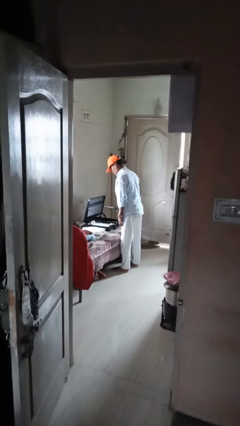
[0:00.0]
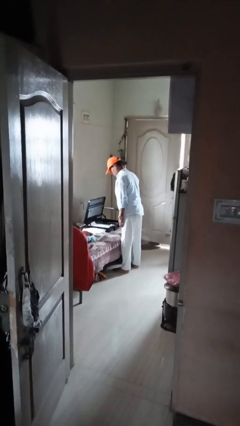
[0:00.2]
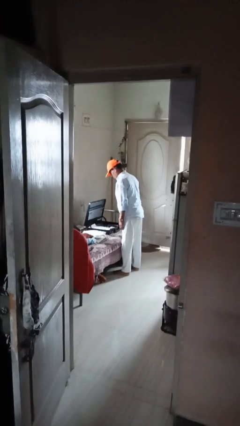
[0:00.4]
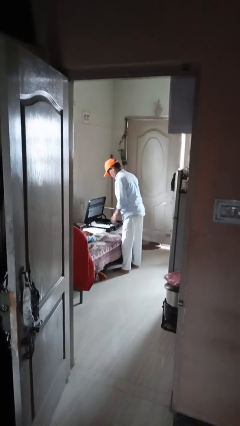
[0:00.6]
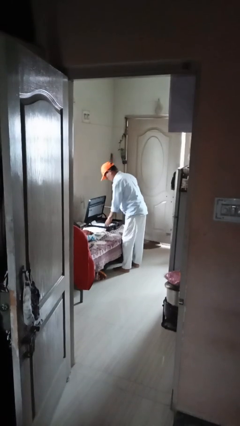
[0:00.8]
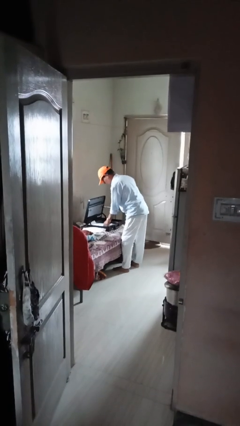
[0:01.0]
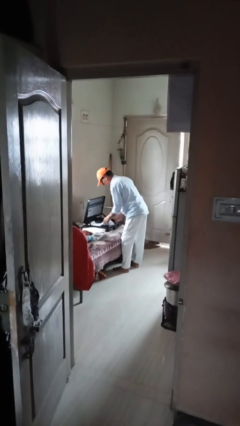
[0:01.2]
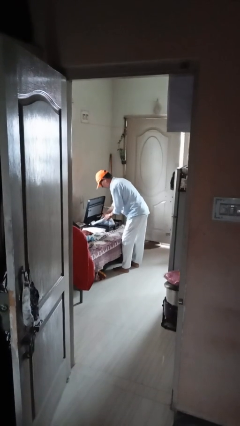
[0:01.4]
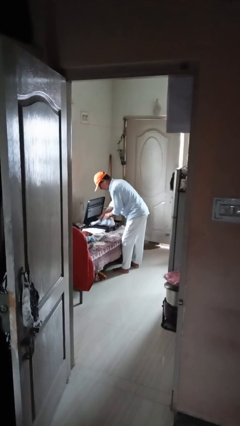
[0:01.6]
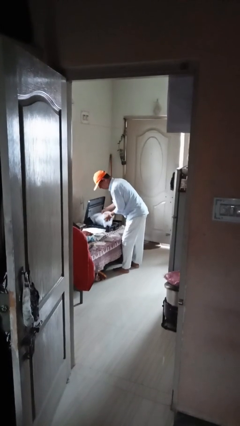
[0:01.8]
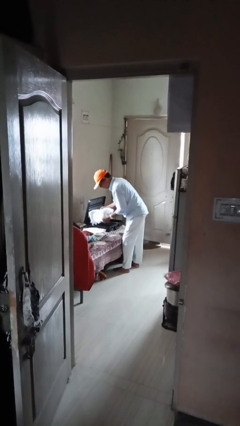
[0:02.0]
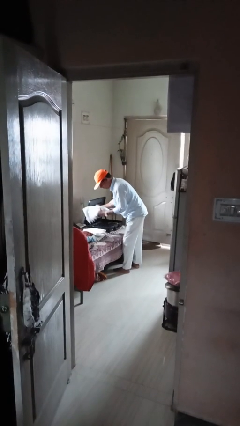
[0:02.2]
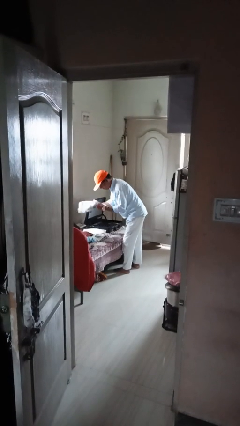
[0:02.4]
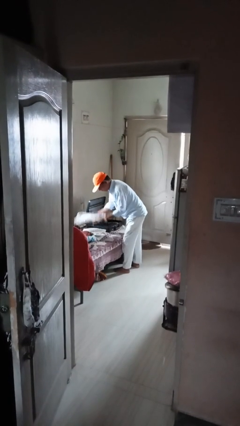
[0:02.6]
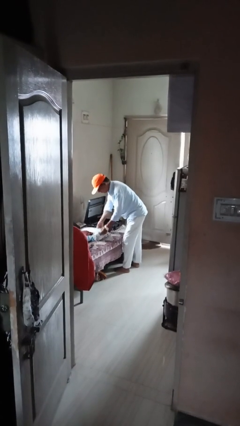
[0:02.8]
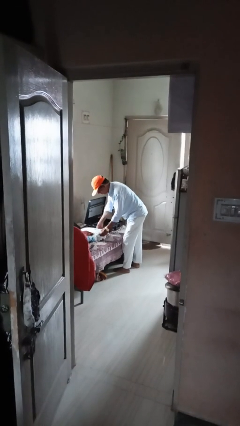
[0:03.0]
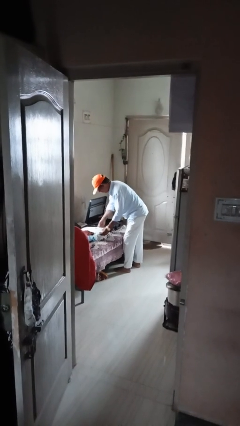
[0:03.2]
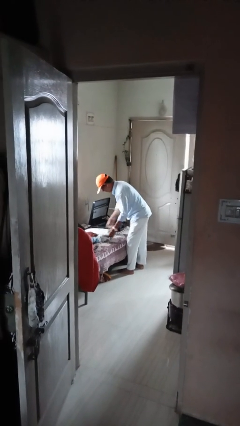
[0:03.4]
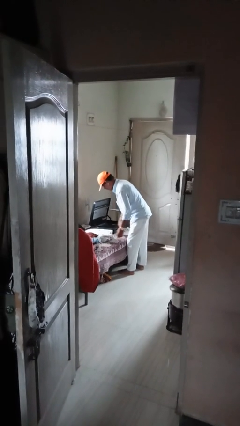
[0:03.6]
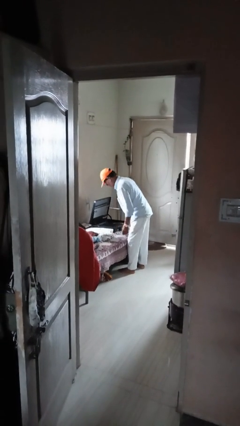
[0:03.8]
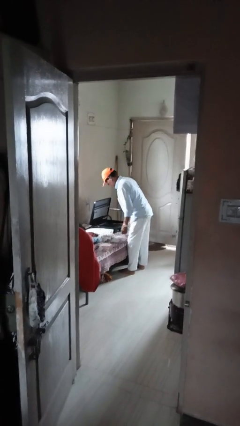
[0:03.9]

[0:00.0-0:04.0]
person unloads clothes from suitcase

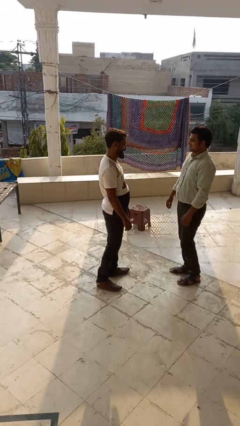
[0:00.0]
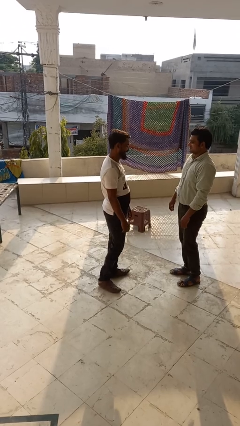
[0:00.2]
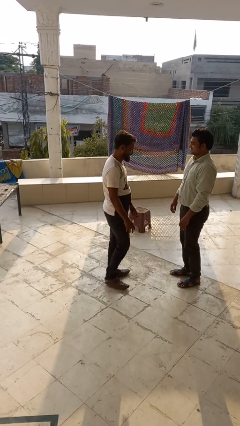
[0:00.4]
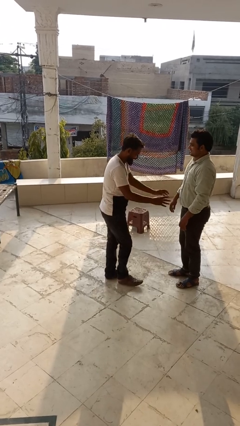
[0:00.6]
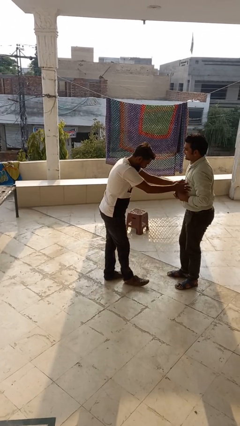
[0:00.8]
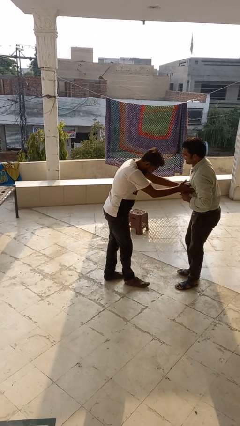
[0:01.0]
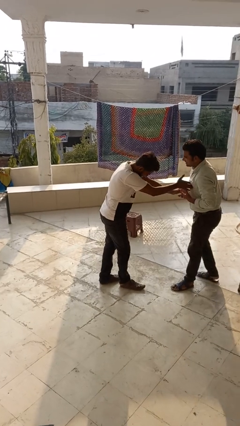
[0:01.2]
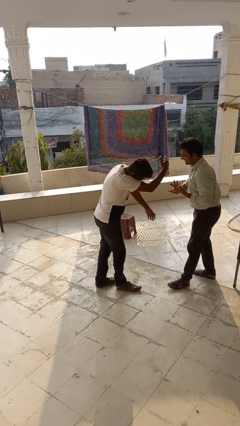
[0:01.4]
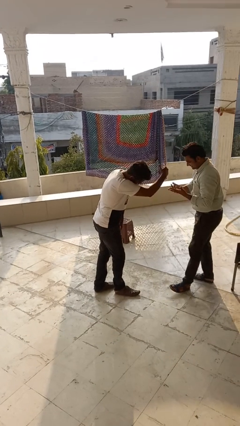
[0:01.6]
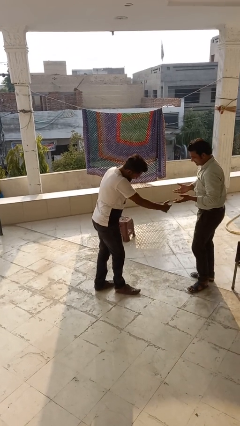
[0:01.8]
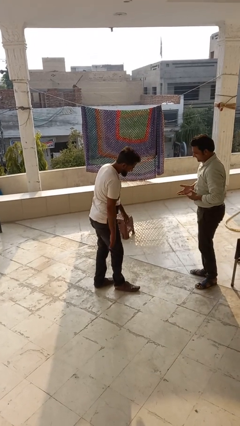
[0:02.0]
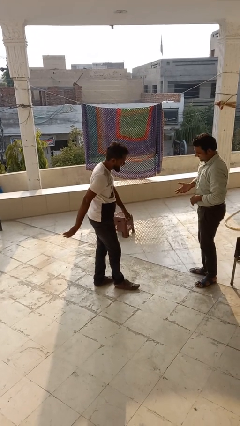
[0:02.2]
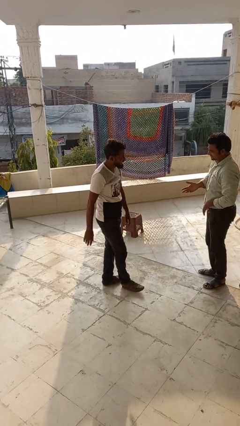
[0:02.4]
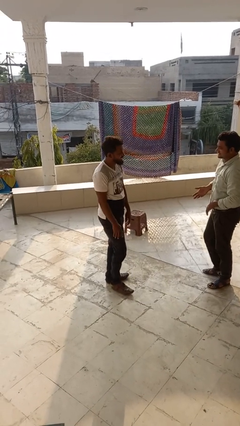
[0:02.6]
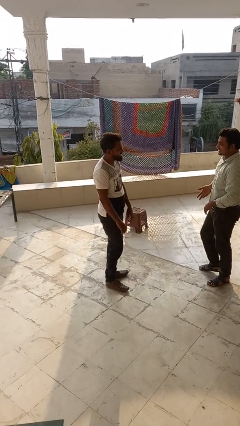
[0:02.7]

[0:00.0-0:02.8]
person shoves person

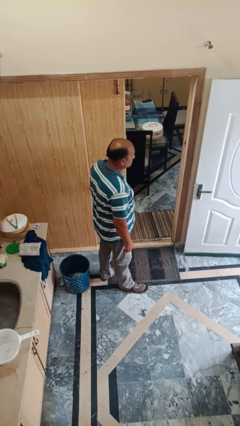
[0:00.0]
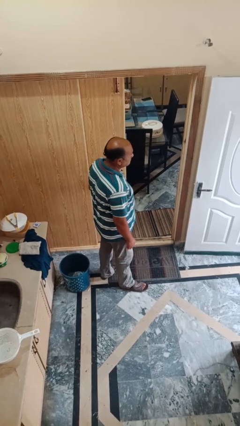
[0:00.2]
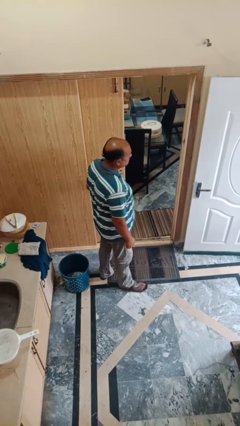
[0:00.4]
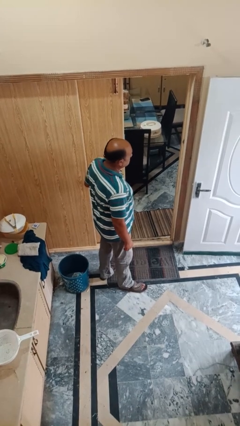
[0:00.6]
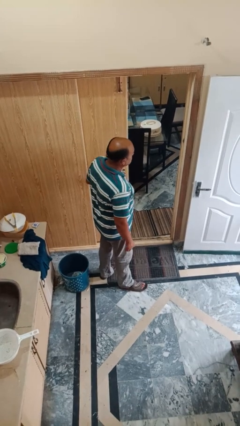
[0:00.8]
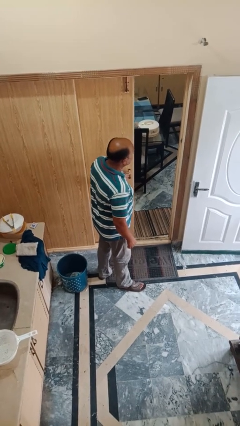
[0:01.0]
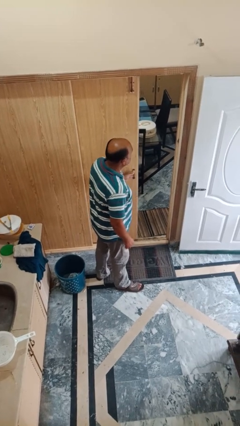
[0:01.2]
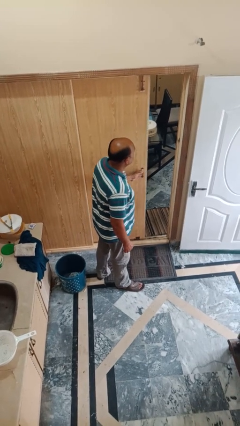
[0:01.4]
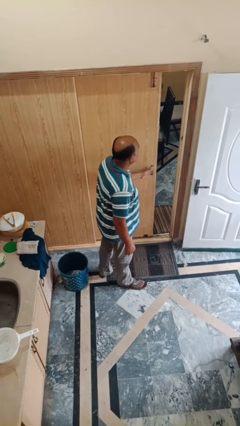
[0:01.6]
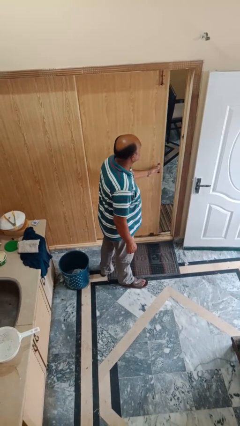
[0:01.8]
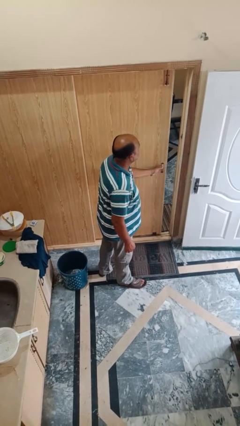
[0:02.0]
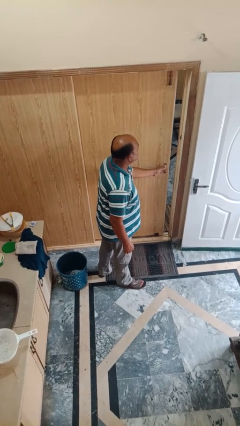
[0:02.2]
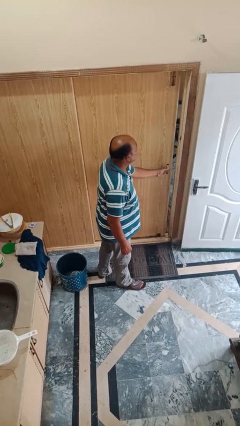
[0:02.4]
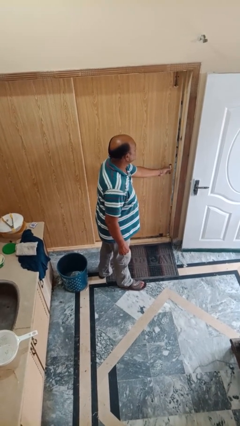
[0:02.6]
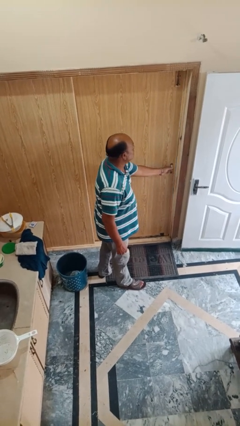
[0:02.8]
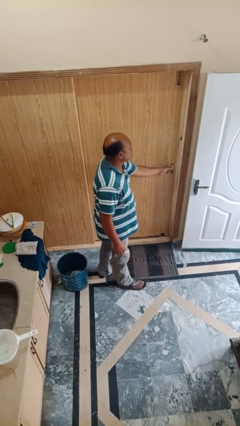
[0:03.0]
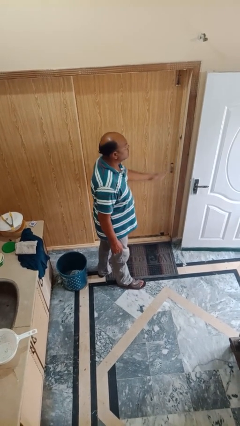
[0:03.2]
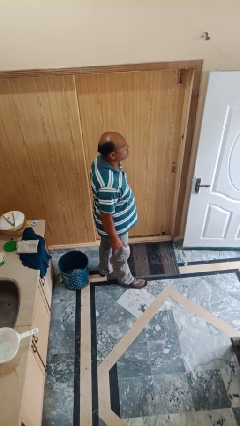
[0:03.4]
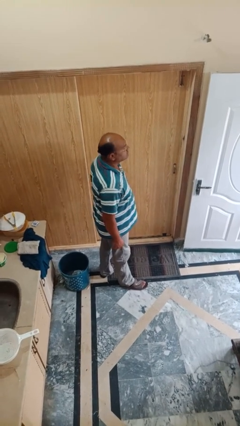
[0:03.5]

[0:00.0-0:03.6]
person closes sliding door

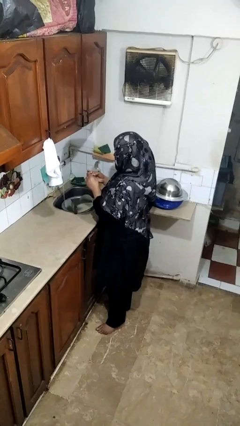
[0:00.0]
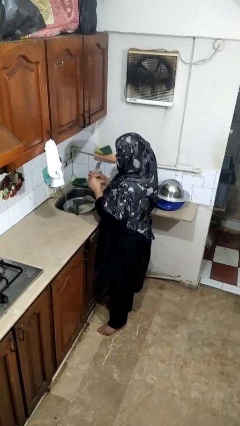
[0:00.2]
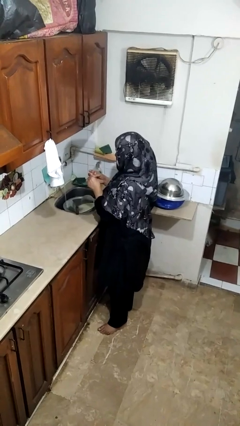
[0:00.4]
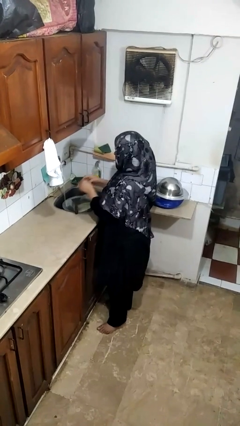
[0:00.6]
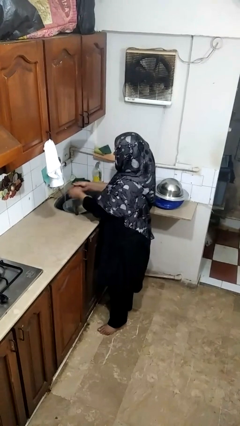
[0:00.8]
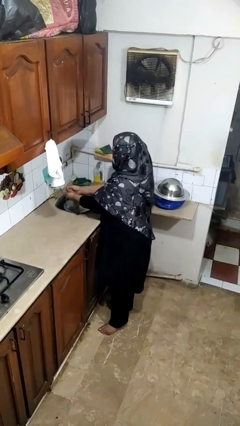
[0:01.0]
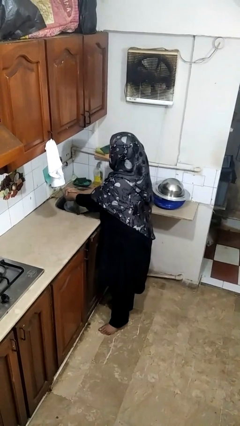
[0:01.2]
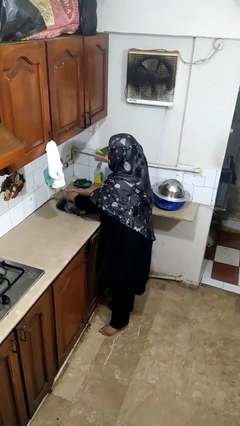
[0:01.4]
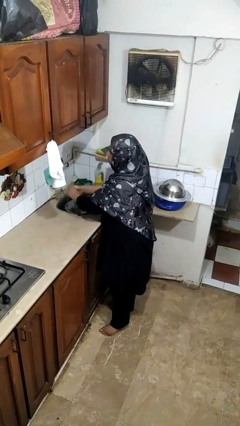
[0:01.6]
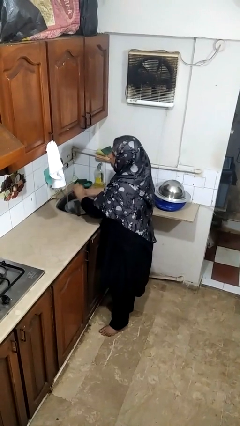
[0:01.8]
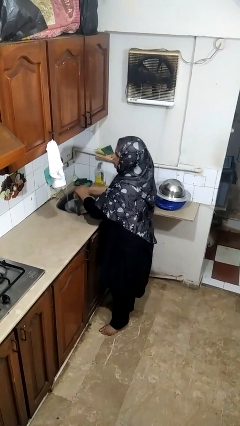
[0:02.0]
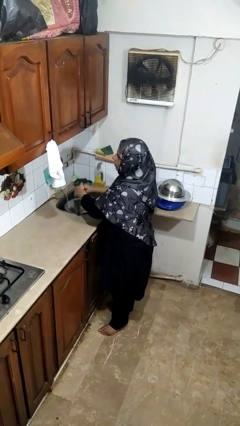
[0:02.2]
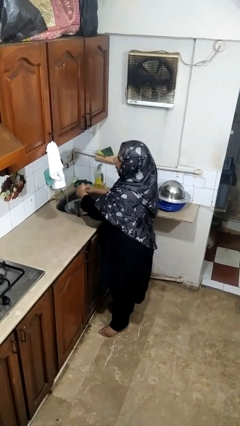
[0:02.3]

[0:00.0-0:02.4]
person washes hands

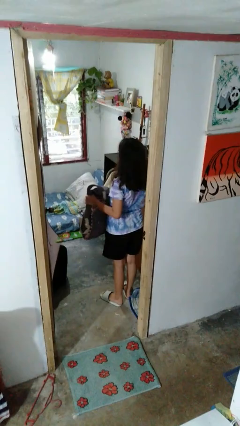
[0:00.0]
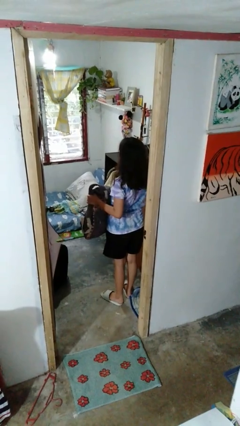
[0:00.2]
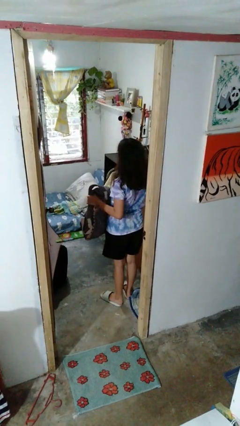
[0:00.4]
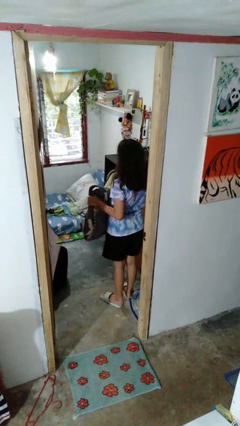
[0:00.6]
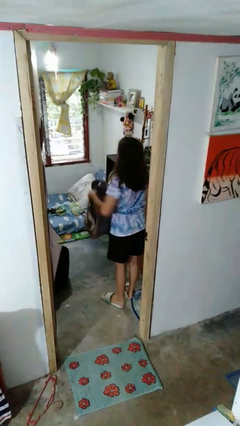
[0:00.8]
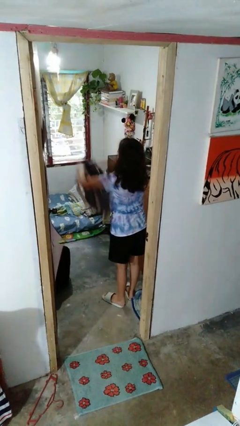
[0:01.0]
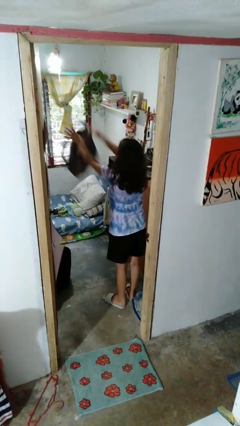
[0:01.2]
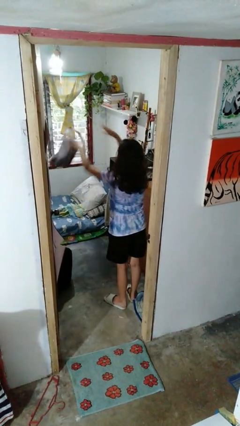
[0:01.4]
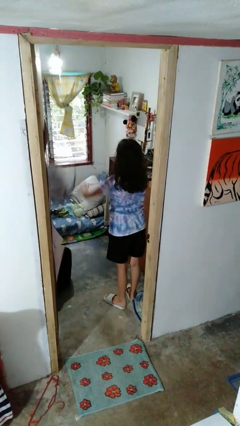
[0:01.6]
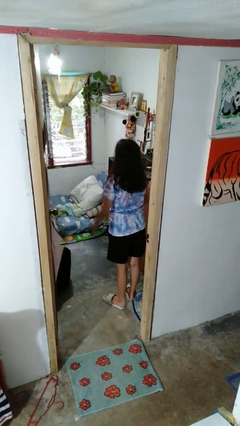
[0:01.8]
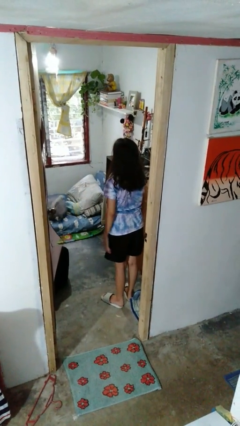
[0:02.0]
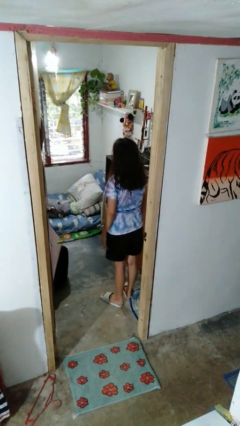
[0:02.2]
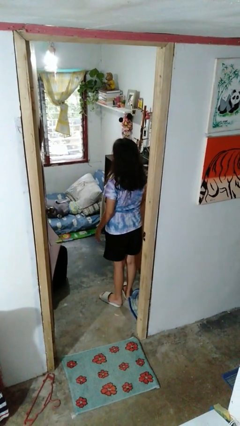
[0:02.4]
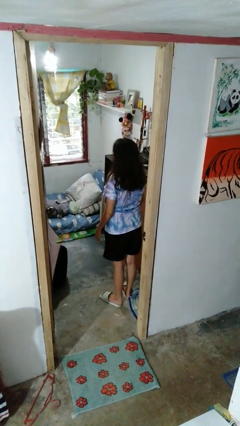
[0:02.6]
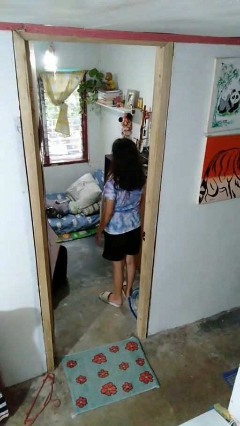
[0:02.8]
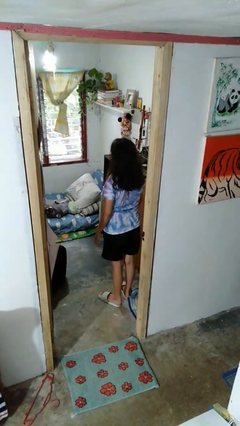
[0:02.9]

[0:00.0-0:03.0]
person throws object on bed

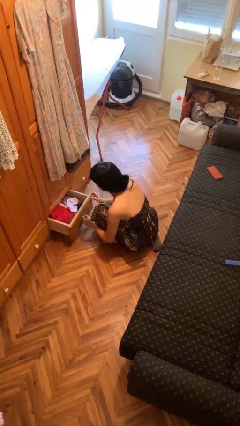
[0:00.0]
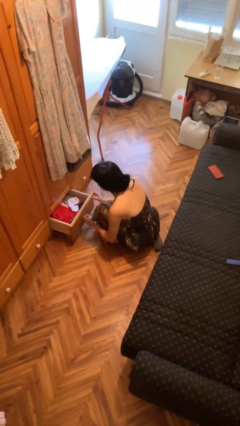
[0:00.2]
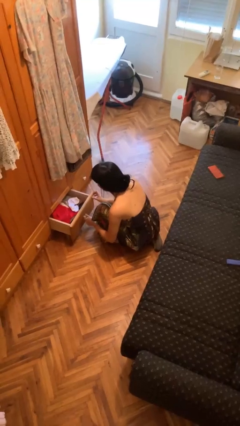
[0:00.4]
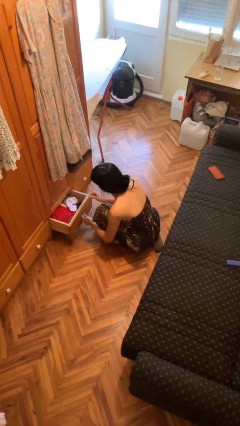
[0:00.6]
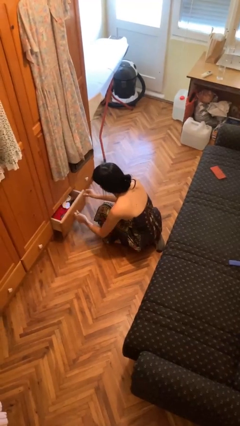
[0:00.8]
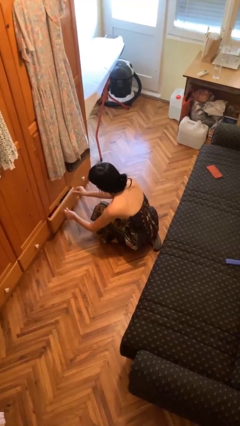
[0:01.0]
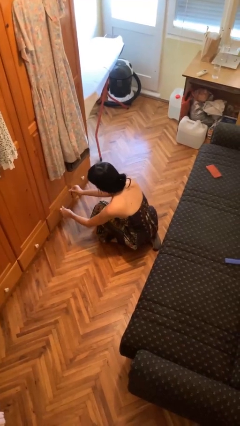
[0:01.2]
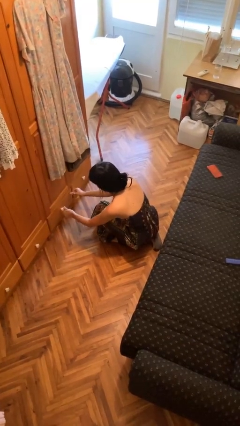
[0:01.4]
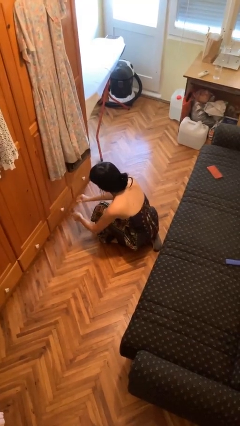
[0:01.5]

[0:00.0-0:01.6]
person closes dresser drawer

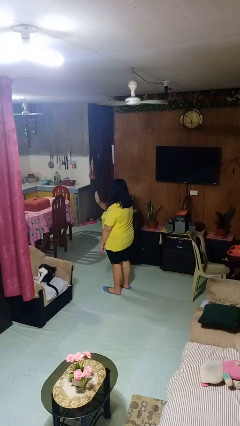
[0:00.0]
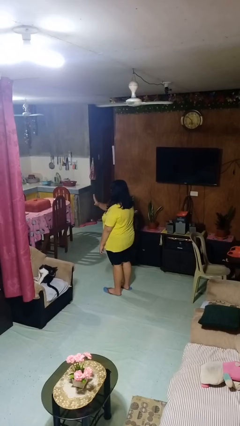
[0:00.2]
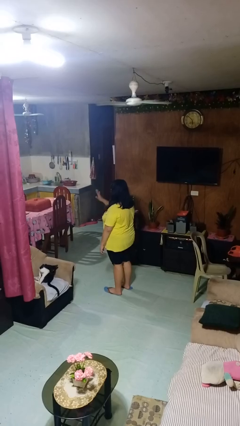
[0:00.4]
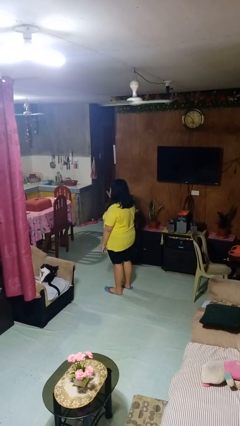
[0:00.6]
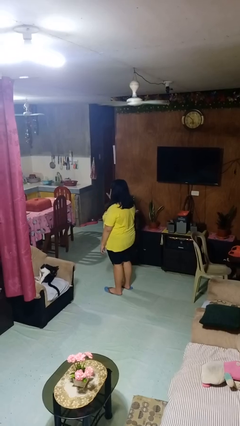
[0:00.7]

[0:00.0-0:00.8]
person gestures swipe right
